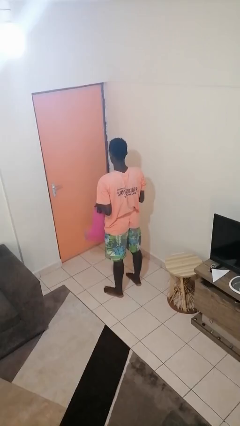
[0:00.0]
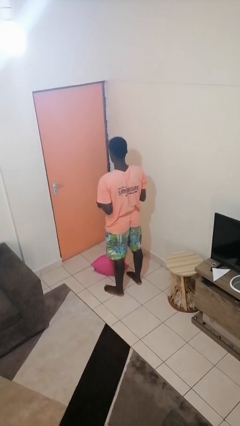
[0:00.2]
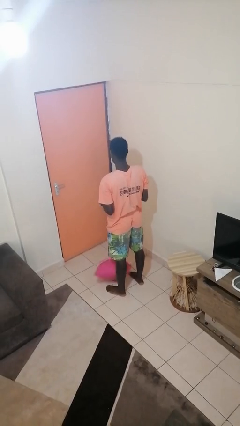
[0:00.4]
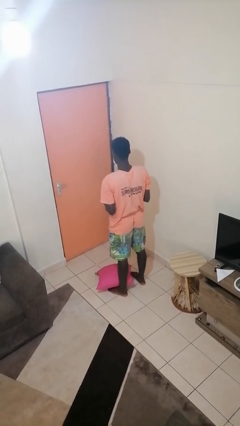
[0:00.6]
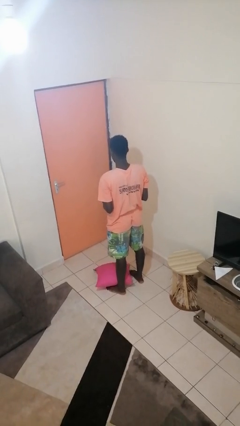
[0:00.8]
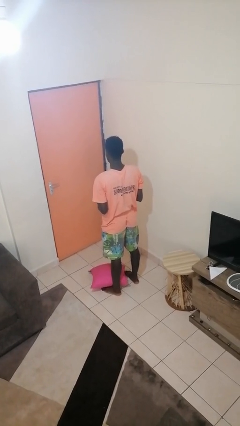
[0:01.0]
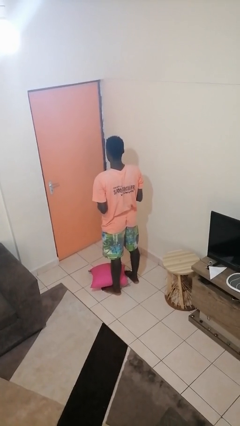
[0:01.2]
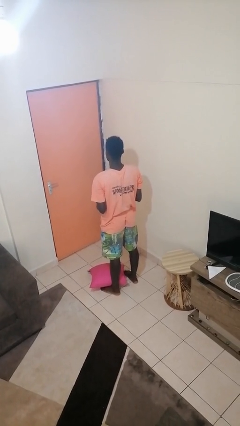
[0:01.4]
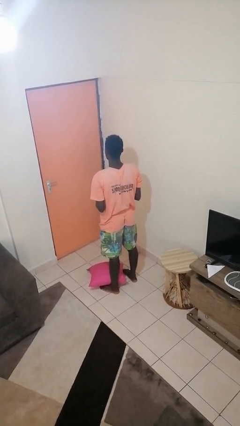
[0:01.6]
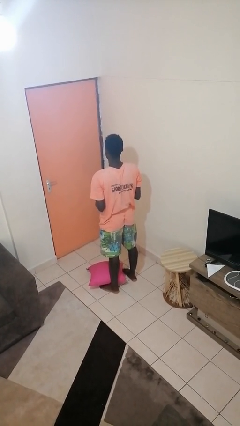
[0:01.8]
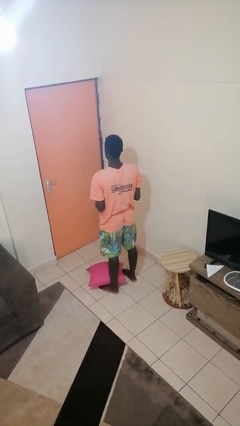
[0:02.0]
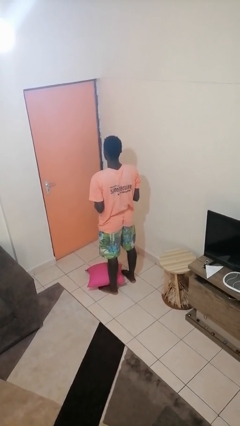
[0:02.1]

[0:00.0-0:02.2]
person drops object

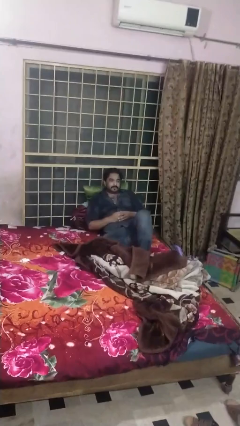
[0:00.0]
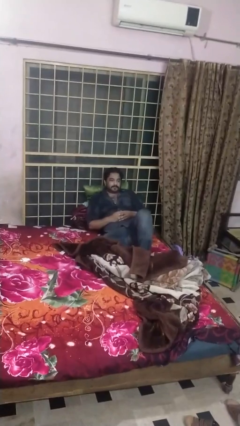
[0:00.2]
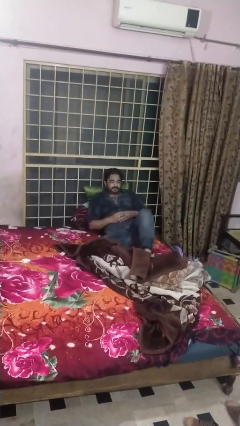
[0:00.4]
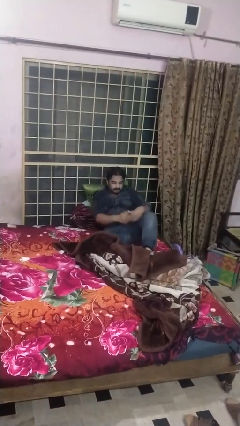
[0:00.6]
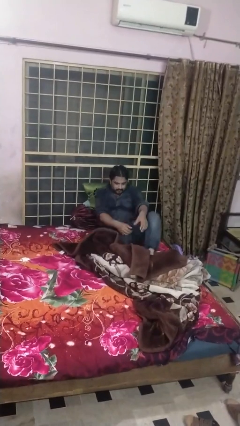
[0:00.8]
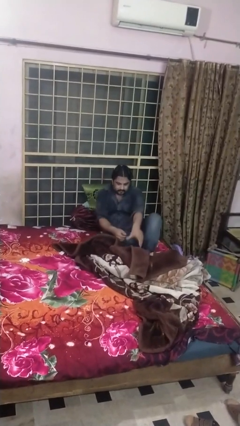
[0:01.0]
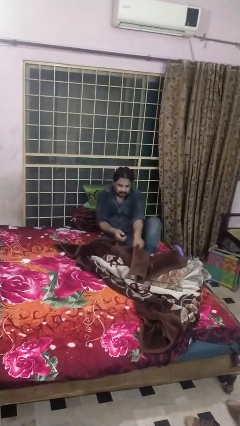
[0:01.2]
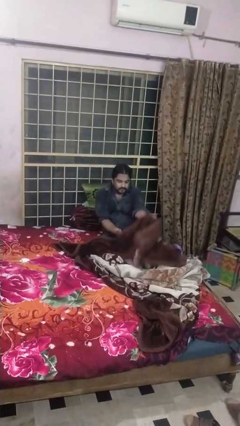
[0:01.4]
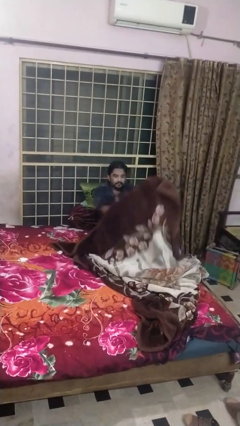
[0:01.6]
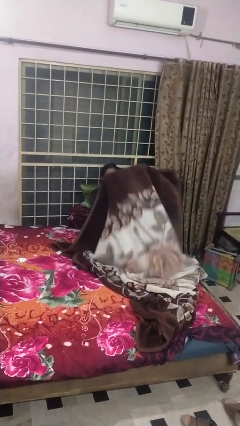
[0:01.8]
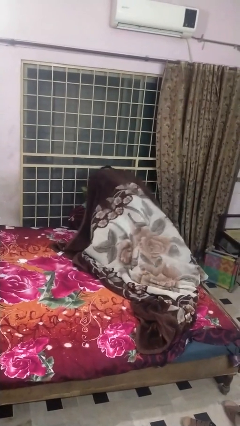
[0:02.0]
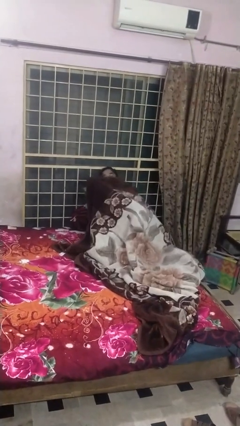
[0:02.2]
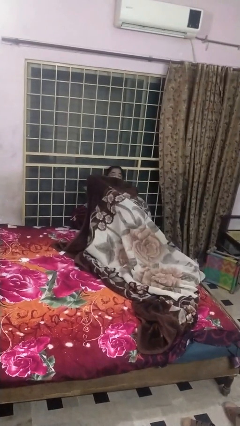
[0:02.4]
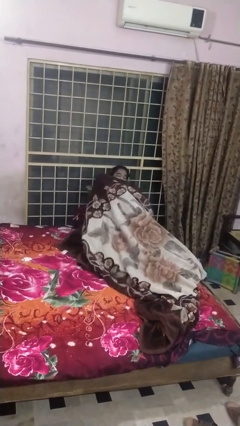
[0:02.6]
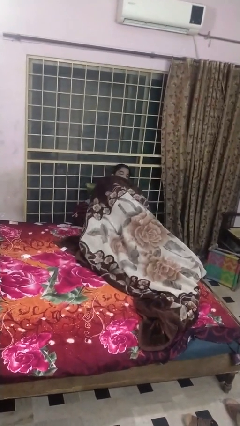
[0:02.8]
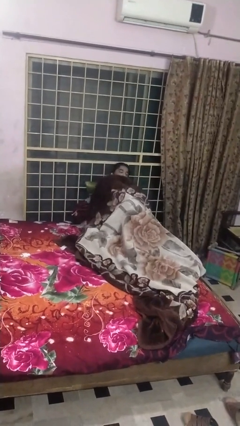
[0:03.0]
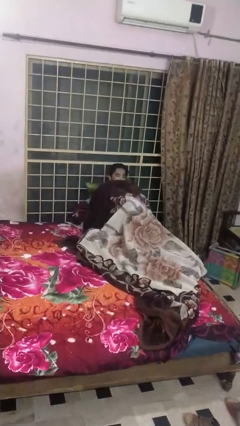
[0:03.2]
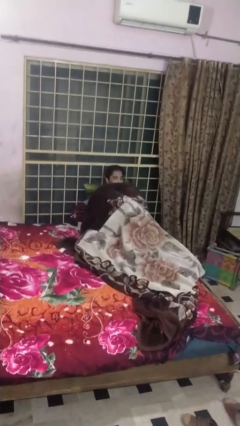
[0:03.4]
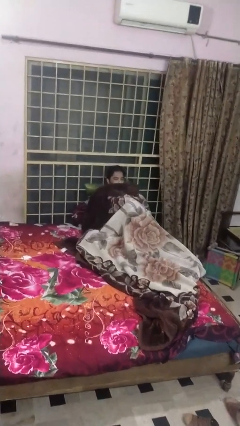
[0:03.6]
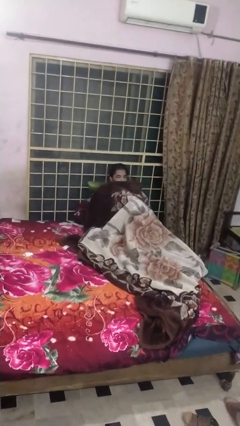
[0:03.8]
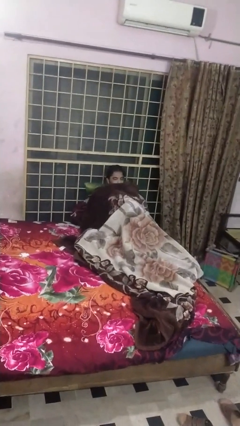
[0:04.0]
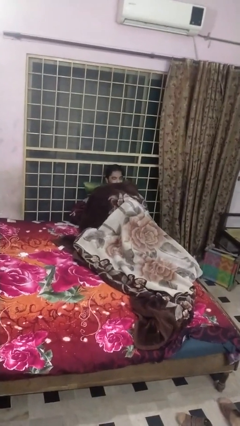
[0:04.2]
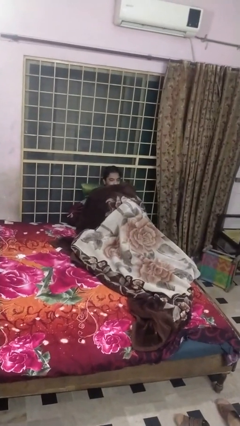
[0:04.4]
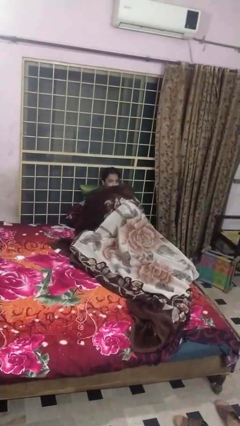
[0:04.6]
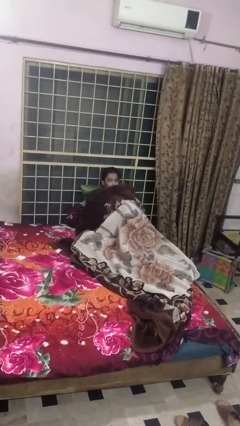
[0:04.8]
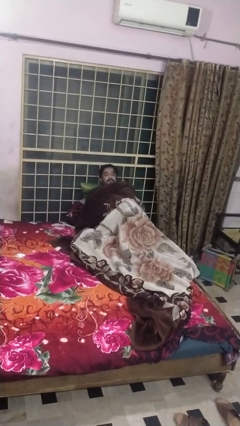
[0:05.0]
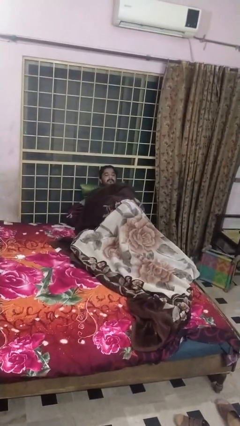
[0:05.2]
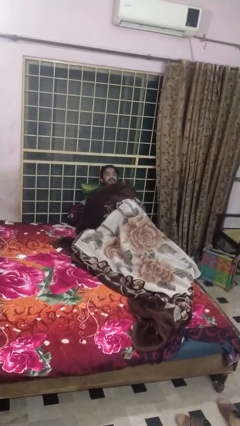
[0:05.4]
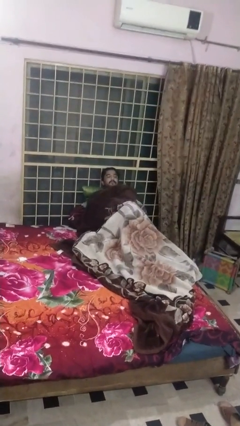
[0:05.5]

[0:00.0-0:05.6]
person covers with blanket

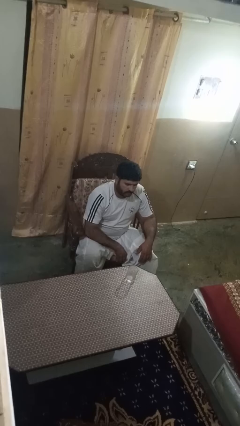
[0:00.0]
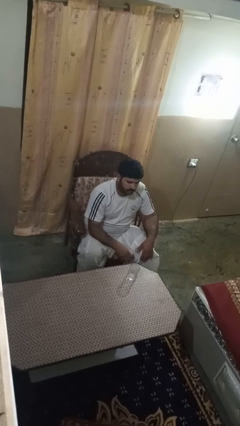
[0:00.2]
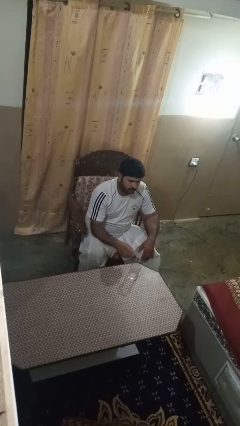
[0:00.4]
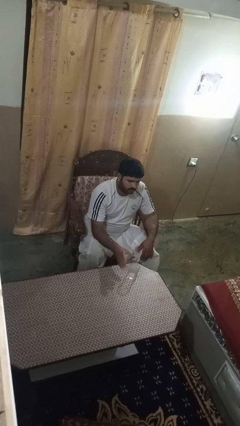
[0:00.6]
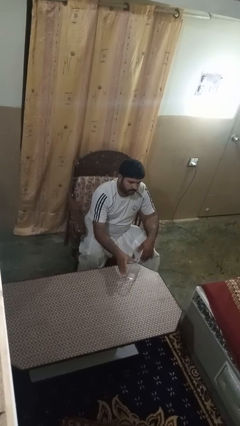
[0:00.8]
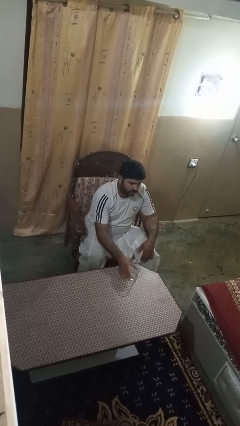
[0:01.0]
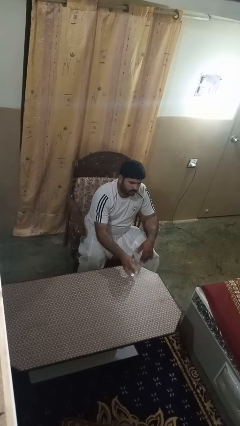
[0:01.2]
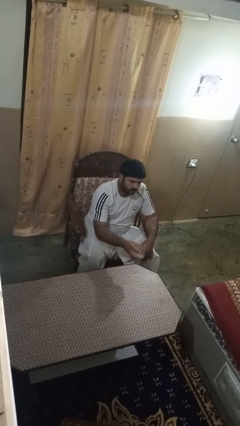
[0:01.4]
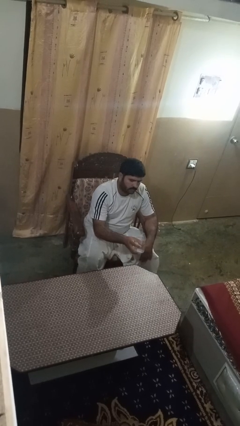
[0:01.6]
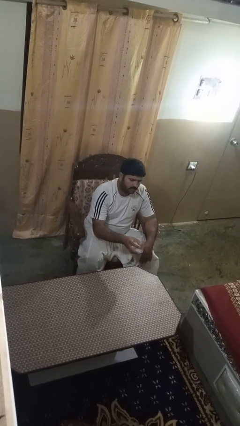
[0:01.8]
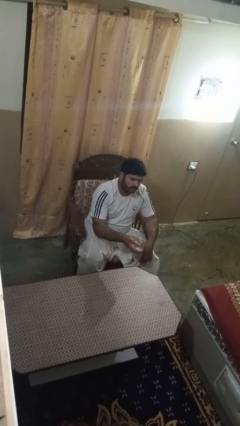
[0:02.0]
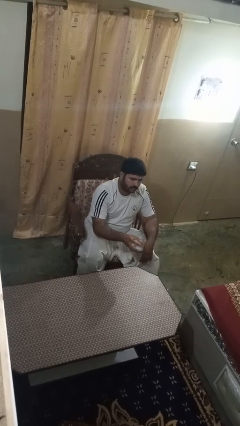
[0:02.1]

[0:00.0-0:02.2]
person picks up object from table

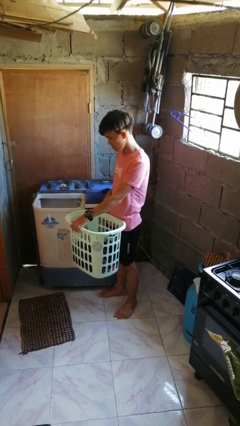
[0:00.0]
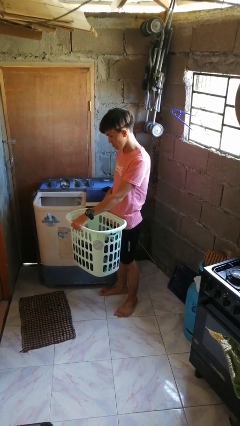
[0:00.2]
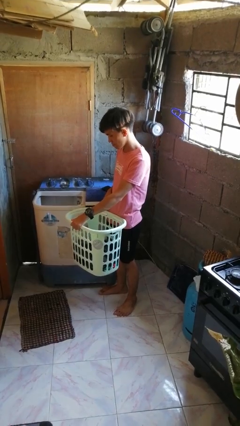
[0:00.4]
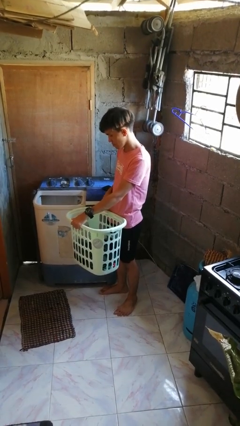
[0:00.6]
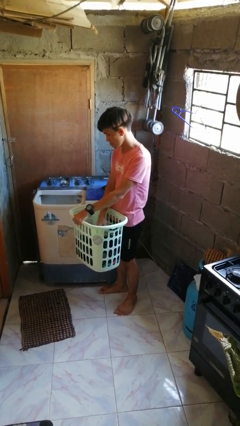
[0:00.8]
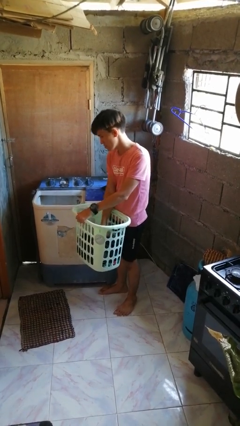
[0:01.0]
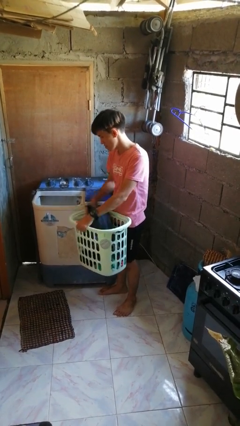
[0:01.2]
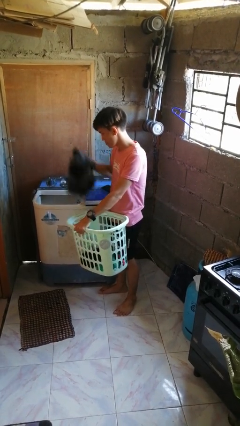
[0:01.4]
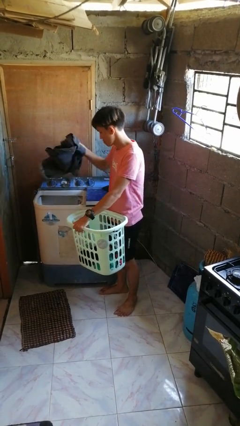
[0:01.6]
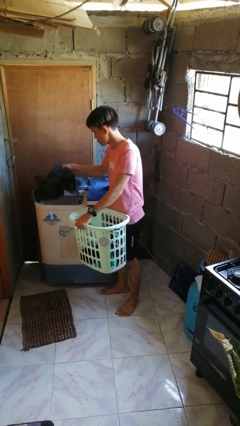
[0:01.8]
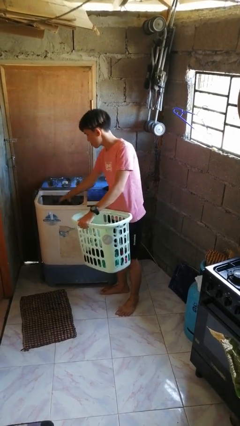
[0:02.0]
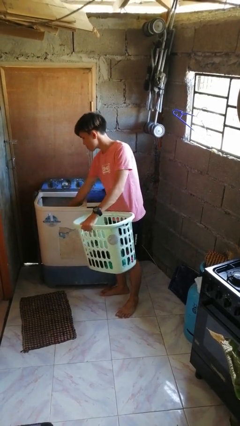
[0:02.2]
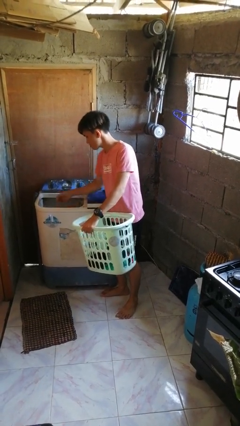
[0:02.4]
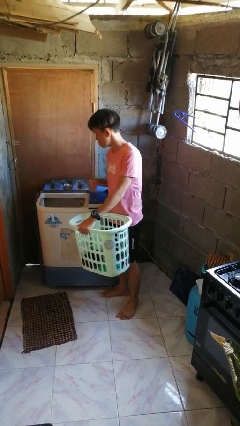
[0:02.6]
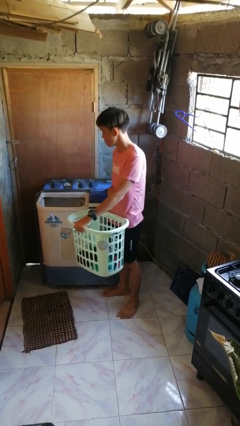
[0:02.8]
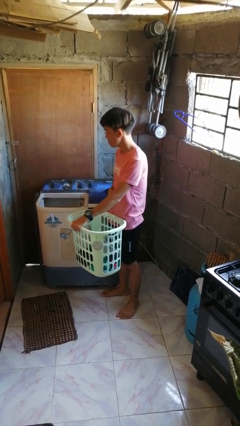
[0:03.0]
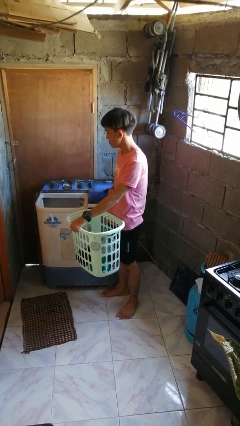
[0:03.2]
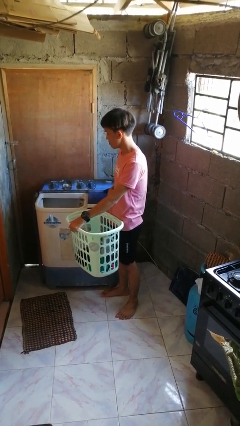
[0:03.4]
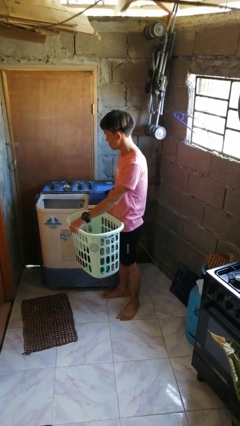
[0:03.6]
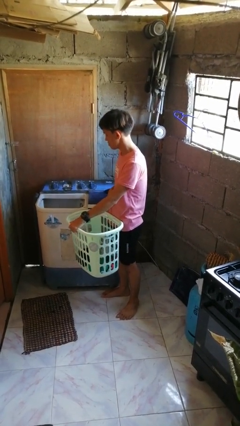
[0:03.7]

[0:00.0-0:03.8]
person loads clotheswasher

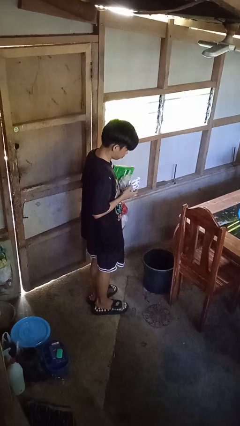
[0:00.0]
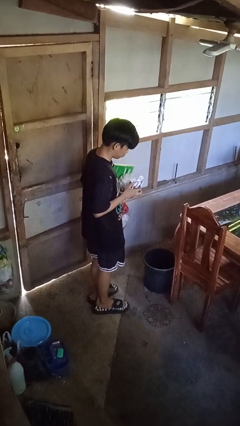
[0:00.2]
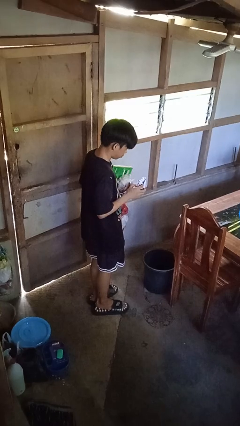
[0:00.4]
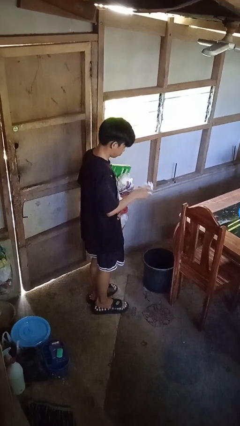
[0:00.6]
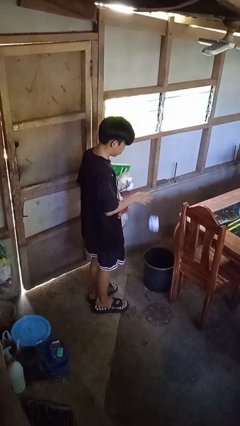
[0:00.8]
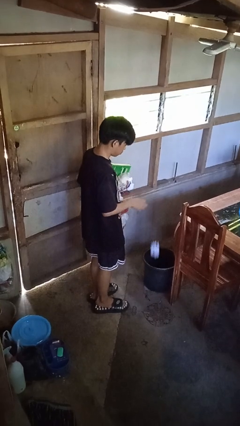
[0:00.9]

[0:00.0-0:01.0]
person discards trash

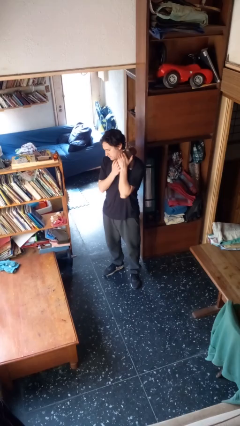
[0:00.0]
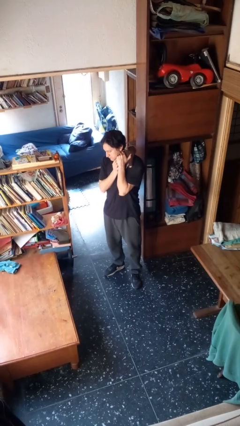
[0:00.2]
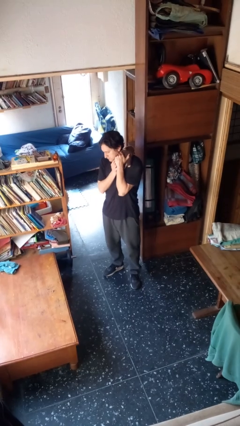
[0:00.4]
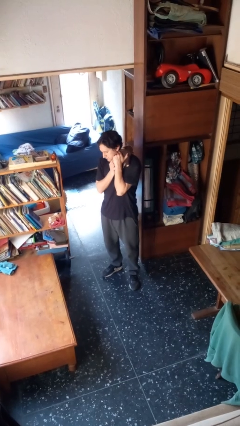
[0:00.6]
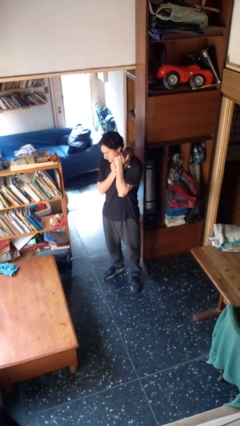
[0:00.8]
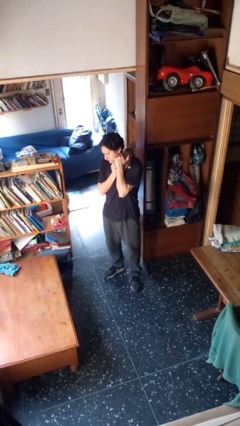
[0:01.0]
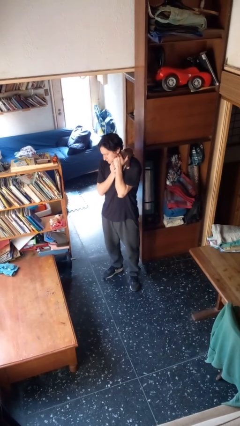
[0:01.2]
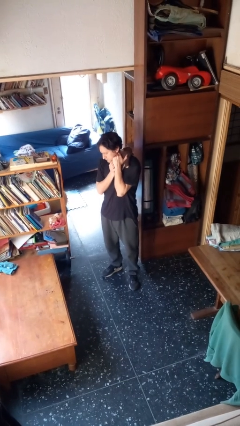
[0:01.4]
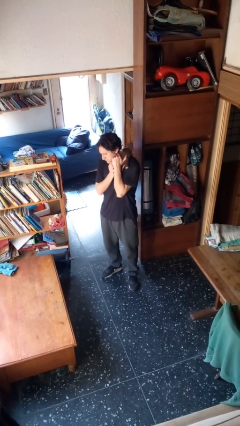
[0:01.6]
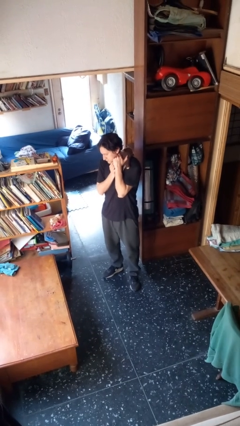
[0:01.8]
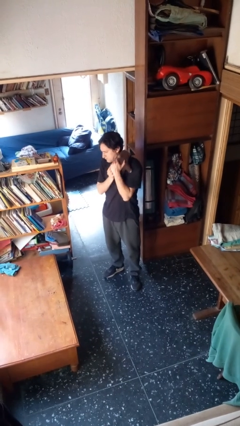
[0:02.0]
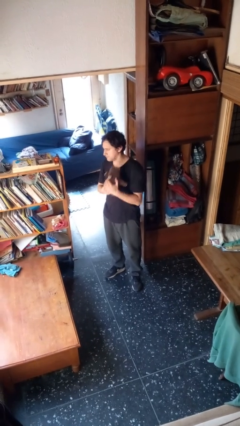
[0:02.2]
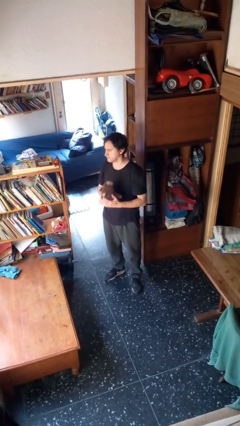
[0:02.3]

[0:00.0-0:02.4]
person hugs stuffed animal
